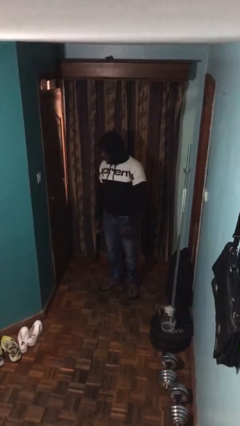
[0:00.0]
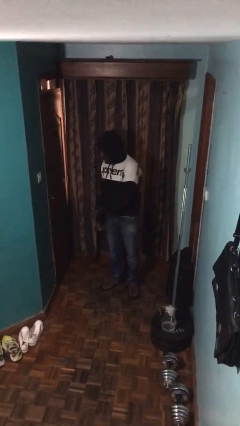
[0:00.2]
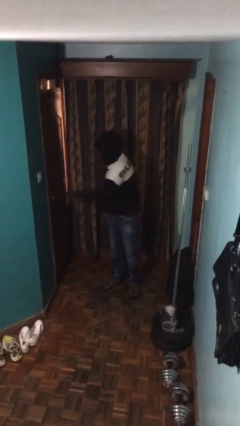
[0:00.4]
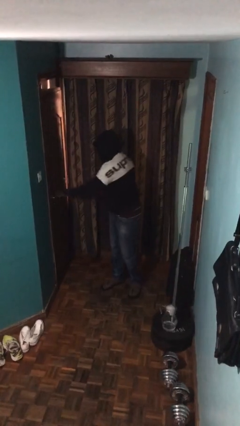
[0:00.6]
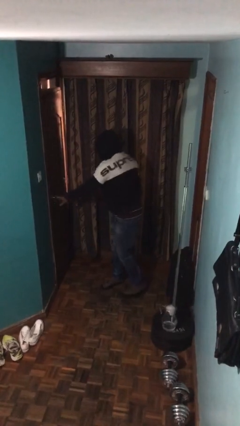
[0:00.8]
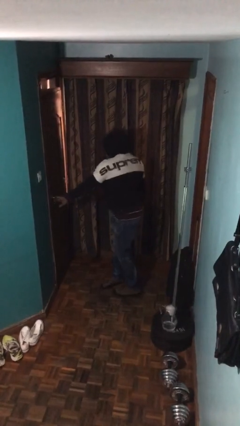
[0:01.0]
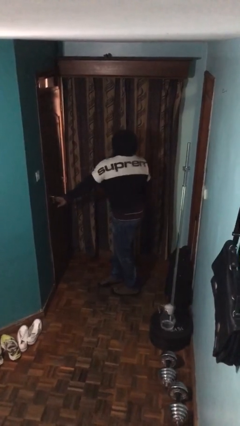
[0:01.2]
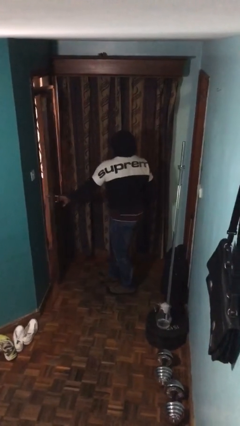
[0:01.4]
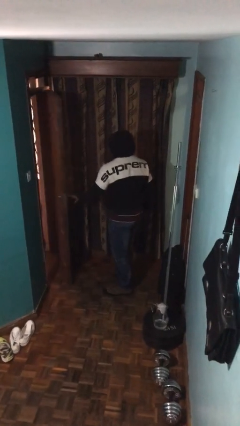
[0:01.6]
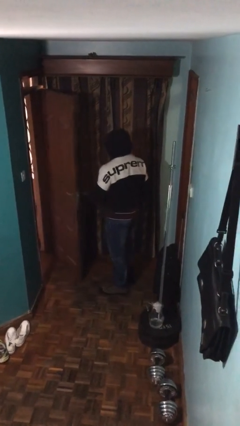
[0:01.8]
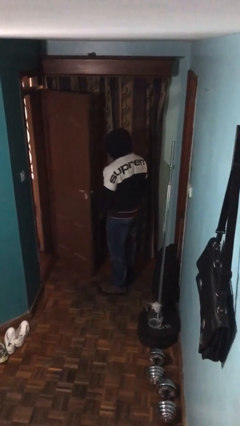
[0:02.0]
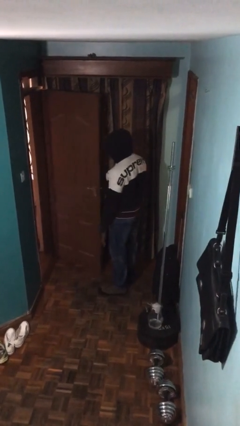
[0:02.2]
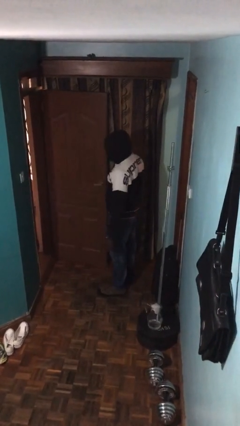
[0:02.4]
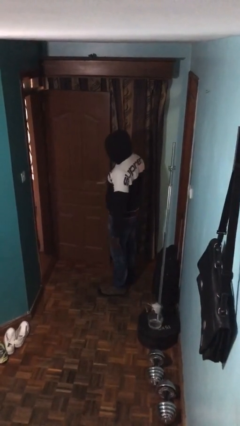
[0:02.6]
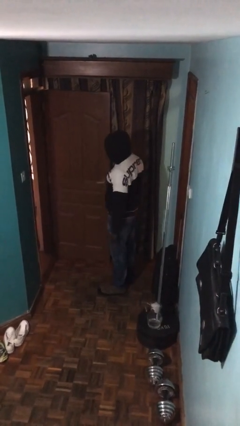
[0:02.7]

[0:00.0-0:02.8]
person opens facility door

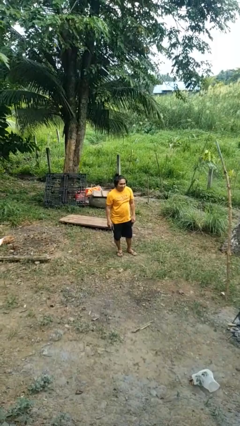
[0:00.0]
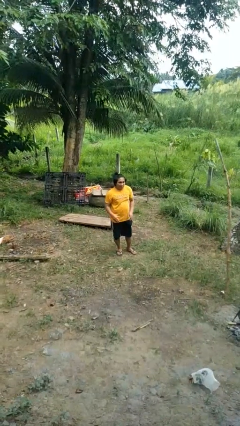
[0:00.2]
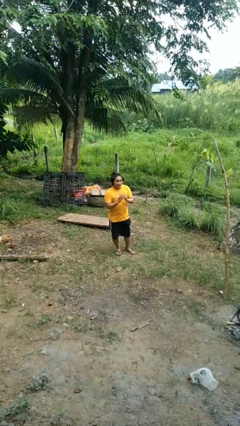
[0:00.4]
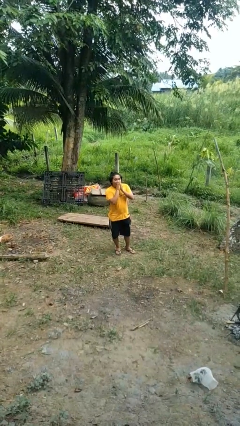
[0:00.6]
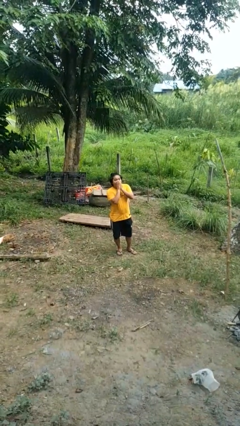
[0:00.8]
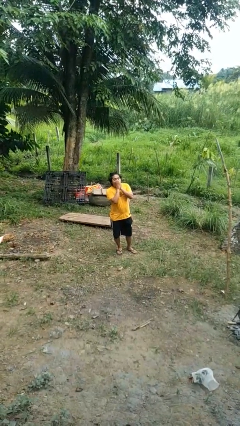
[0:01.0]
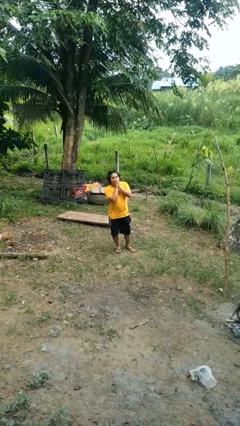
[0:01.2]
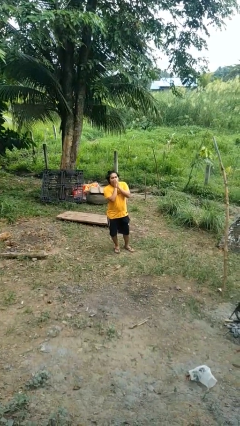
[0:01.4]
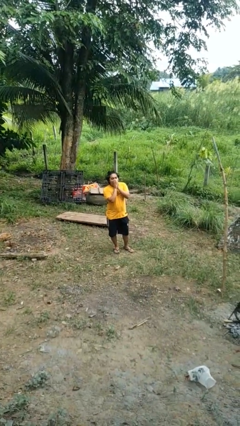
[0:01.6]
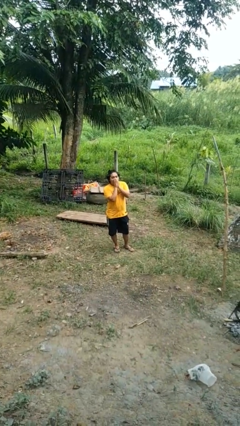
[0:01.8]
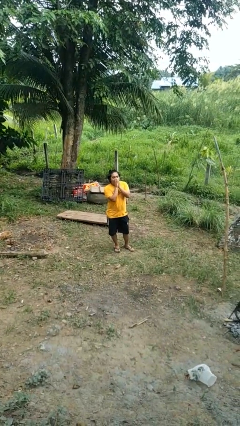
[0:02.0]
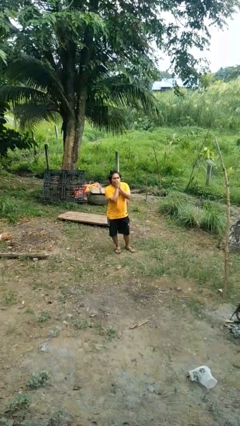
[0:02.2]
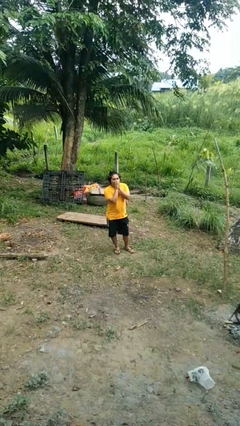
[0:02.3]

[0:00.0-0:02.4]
person covers face with hands

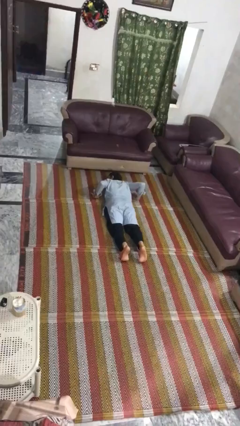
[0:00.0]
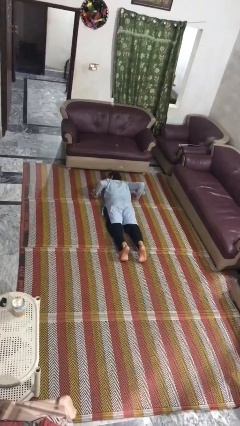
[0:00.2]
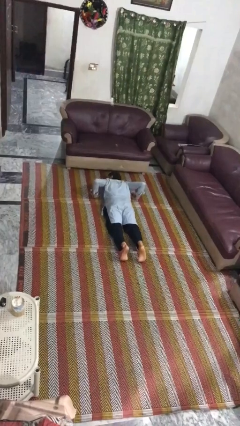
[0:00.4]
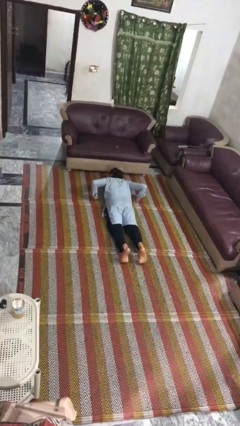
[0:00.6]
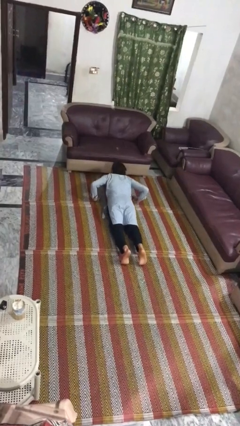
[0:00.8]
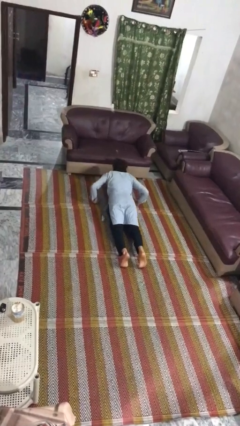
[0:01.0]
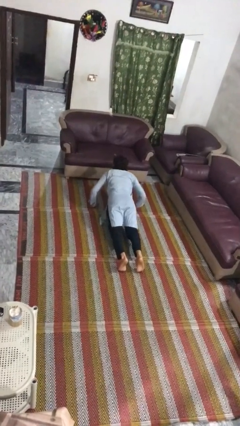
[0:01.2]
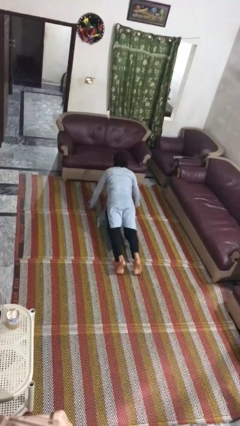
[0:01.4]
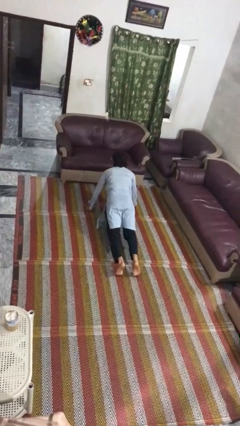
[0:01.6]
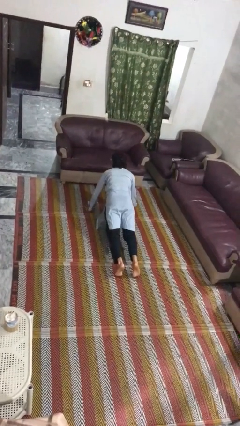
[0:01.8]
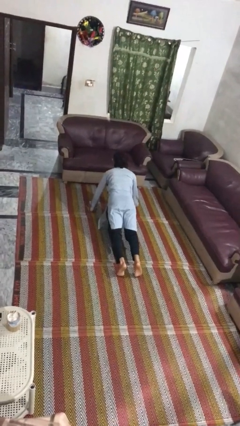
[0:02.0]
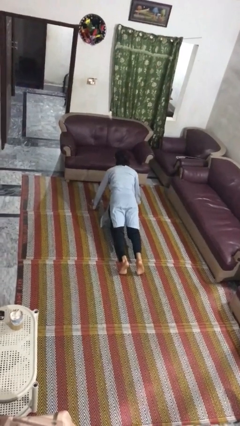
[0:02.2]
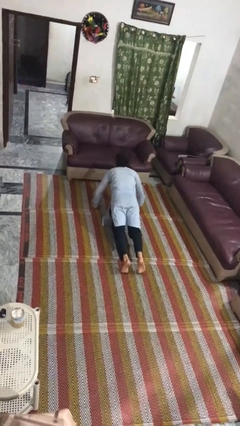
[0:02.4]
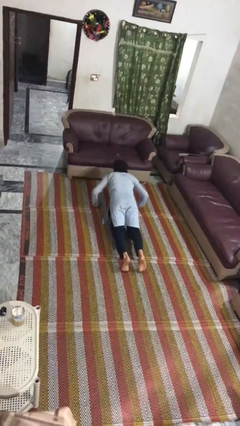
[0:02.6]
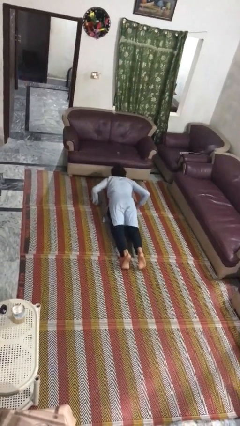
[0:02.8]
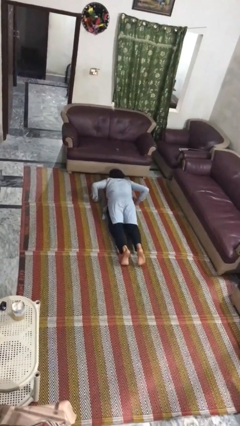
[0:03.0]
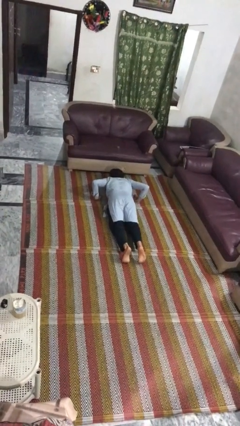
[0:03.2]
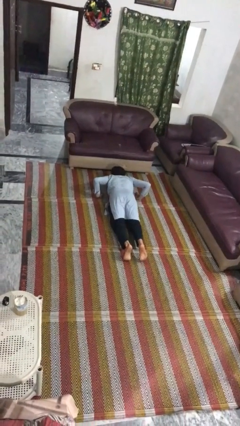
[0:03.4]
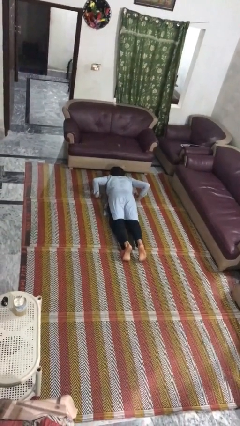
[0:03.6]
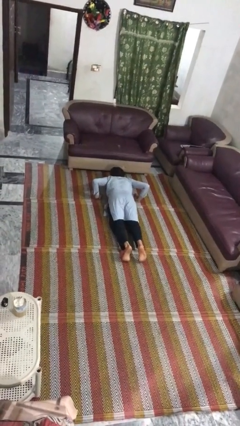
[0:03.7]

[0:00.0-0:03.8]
person exercises with pushup

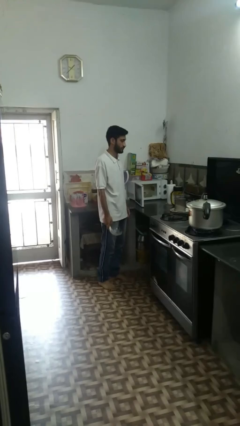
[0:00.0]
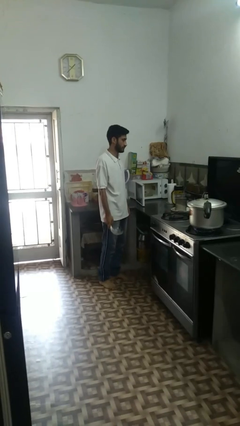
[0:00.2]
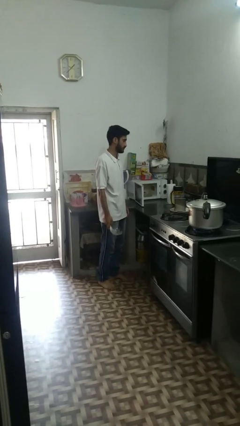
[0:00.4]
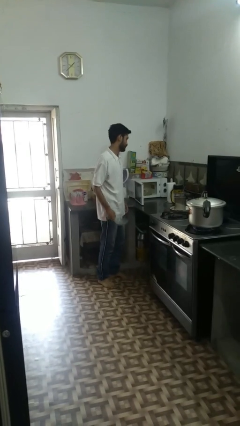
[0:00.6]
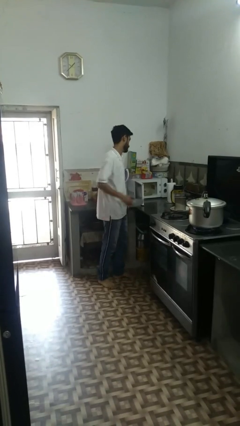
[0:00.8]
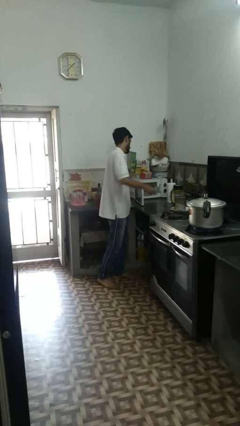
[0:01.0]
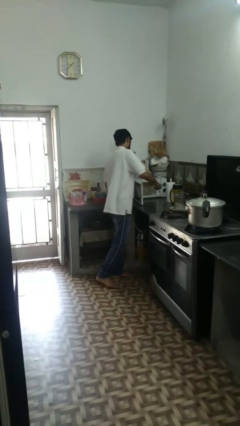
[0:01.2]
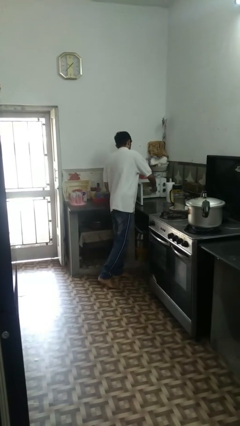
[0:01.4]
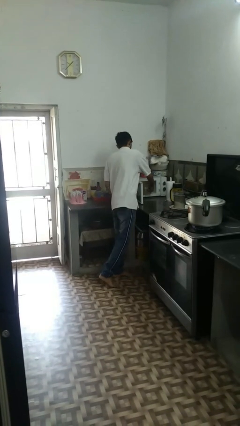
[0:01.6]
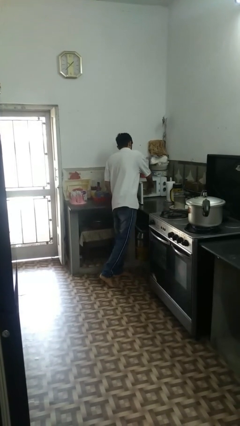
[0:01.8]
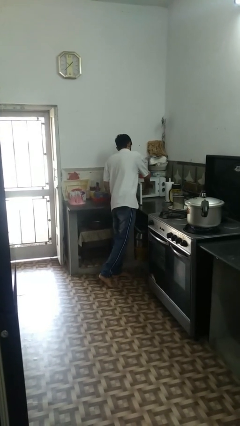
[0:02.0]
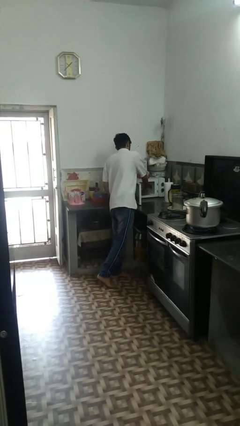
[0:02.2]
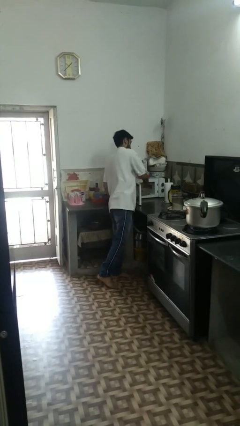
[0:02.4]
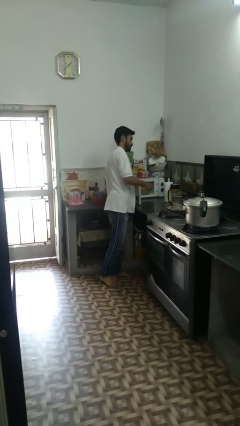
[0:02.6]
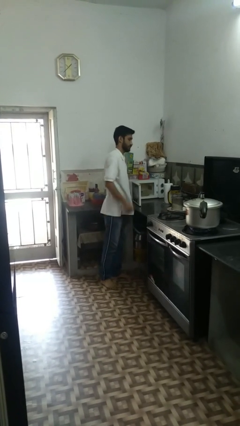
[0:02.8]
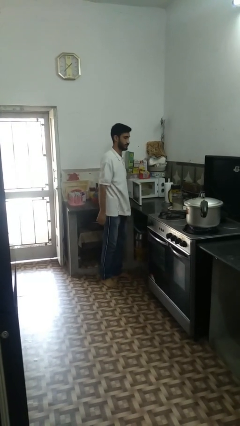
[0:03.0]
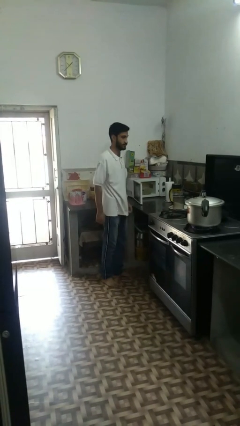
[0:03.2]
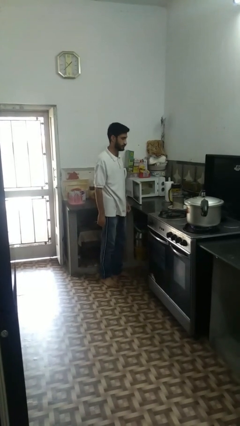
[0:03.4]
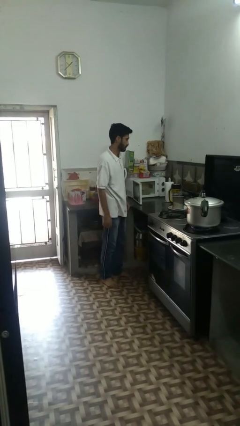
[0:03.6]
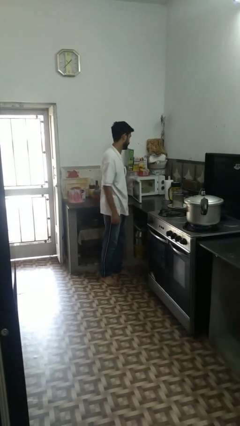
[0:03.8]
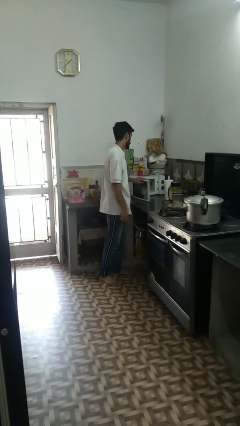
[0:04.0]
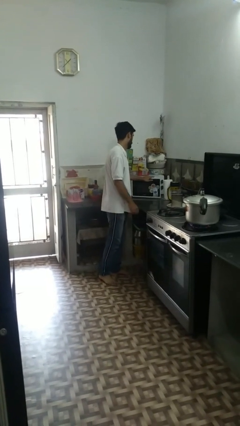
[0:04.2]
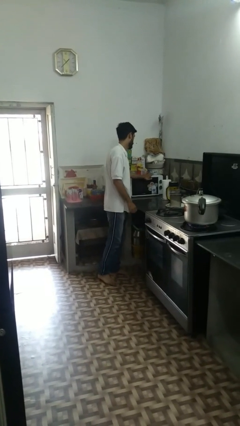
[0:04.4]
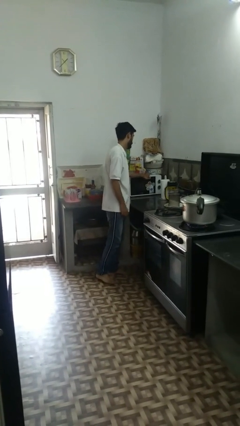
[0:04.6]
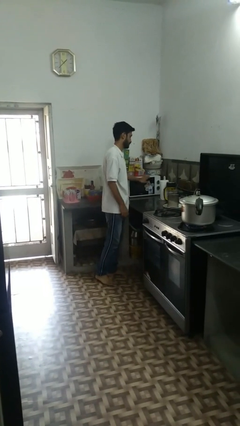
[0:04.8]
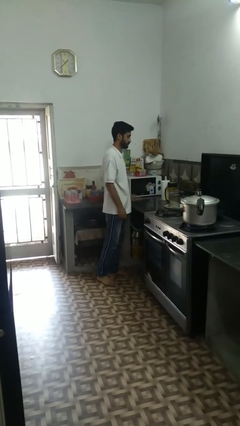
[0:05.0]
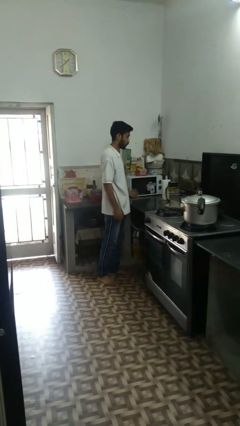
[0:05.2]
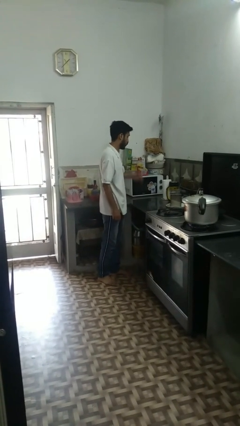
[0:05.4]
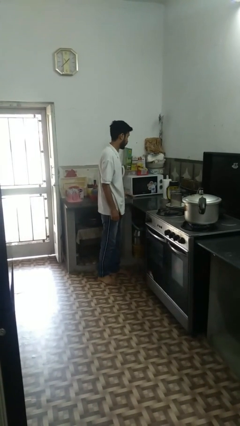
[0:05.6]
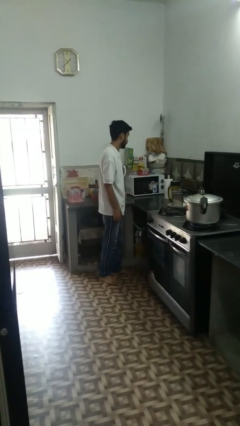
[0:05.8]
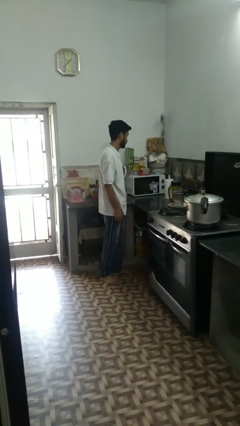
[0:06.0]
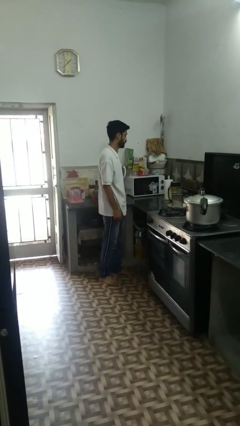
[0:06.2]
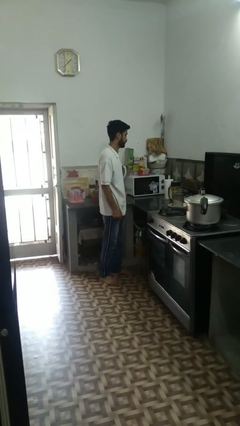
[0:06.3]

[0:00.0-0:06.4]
person puts object into microwave

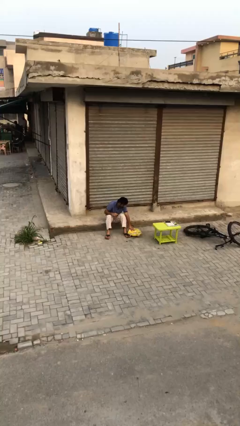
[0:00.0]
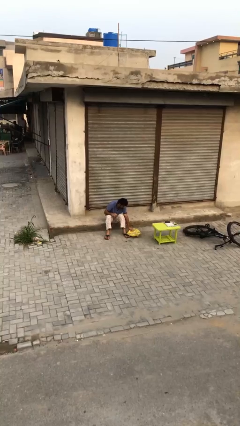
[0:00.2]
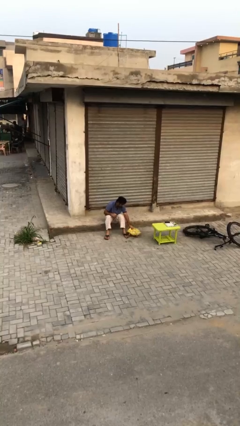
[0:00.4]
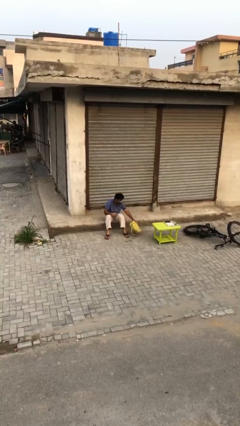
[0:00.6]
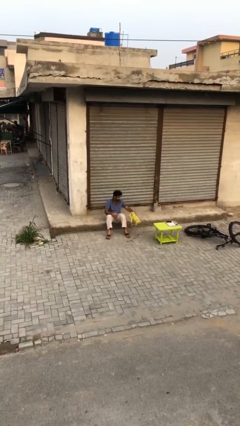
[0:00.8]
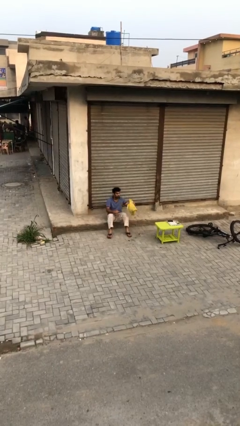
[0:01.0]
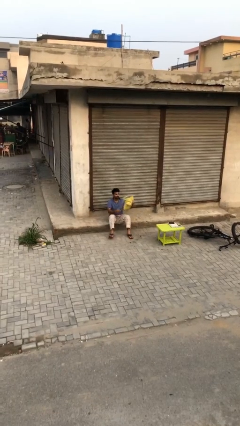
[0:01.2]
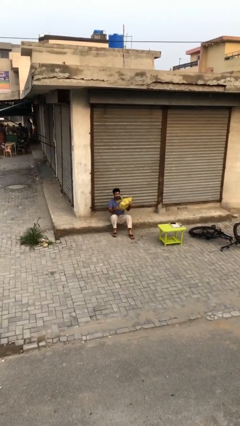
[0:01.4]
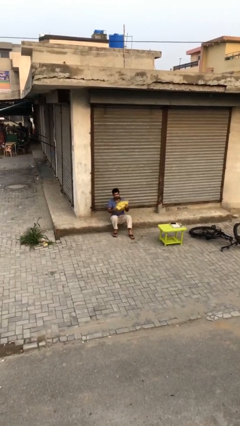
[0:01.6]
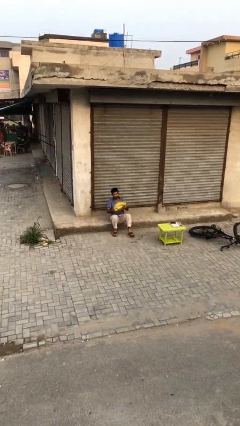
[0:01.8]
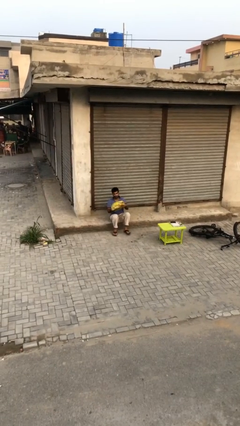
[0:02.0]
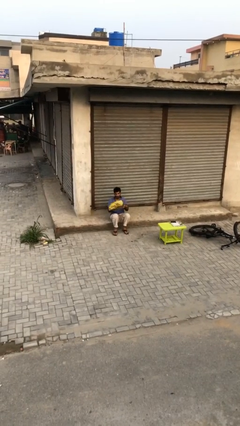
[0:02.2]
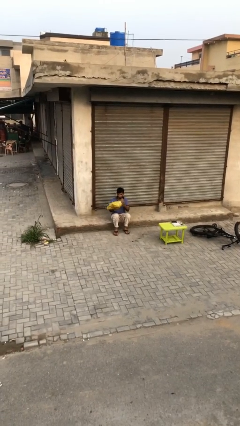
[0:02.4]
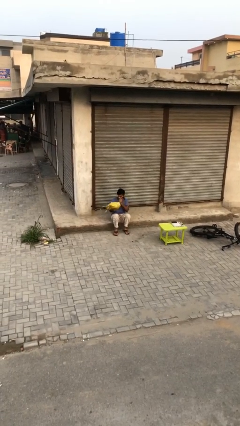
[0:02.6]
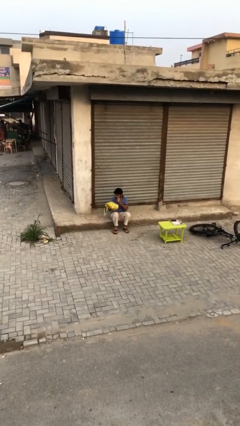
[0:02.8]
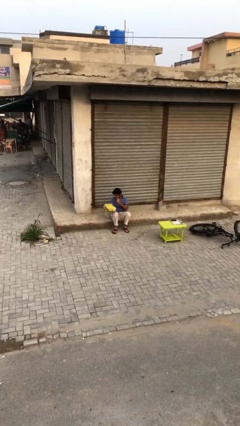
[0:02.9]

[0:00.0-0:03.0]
person picks up object from floor
